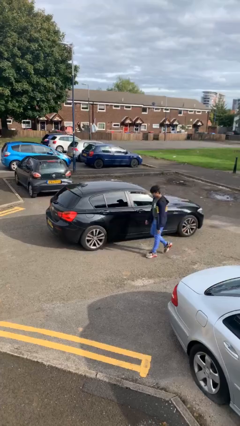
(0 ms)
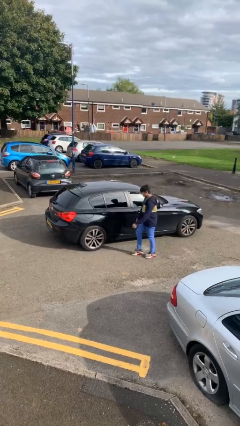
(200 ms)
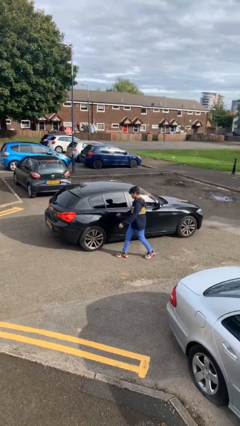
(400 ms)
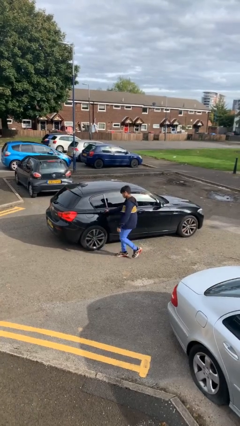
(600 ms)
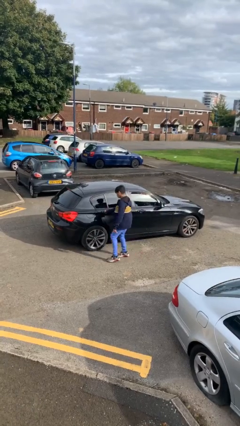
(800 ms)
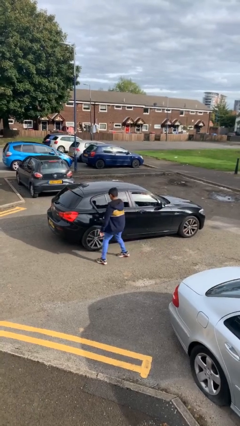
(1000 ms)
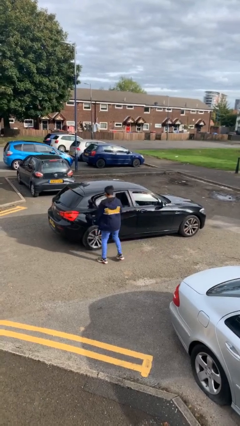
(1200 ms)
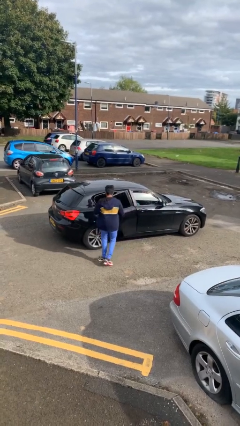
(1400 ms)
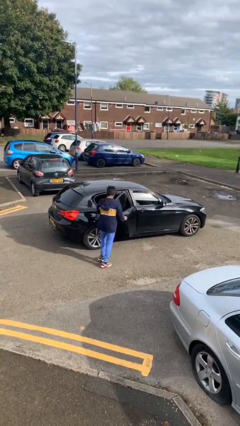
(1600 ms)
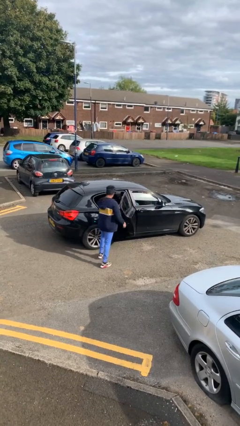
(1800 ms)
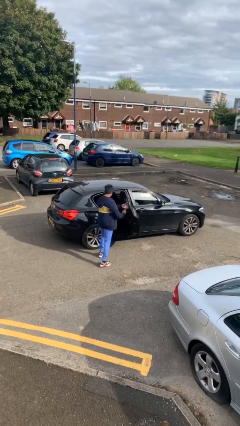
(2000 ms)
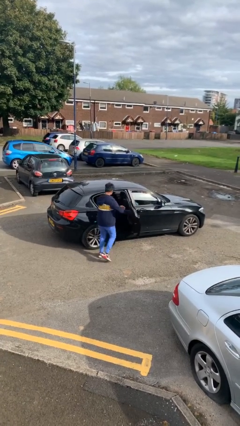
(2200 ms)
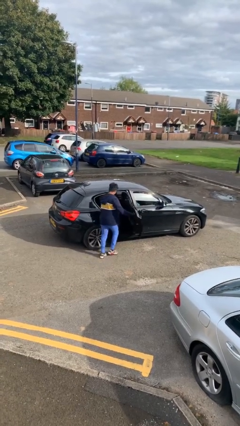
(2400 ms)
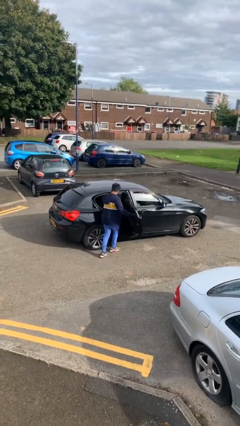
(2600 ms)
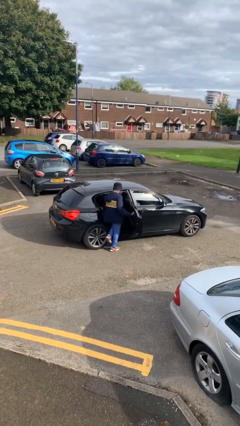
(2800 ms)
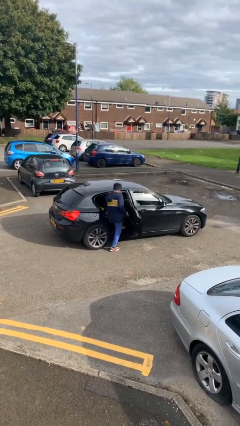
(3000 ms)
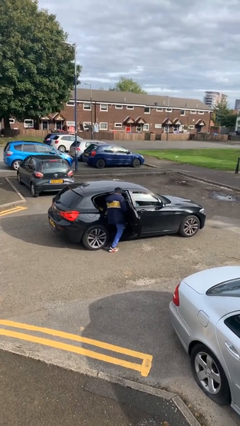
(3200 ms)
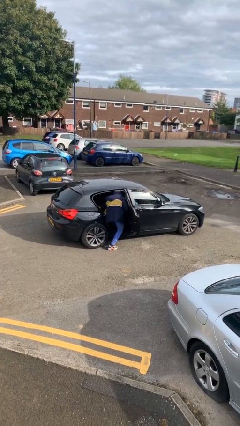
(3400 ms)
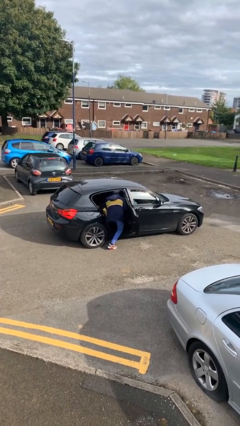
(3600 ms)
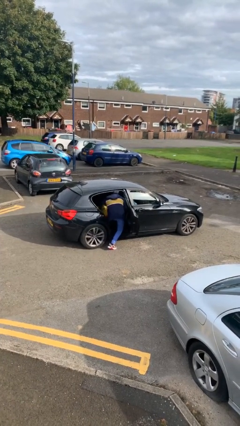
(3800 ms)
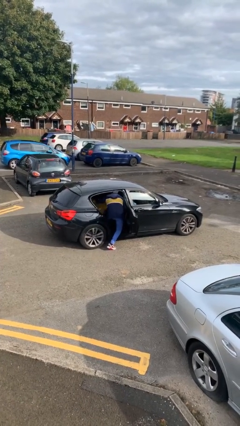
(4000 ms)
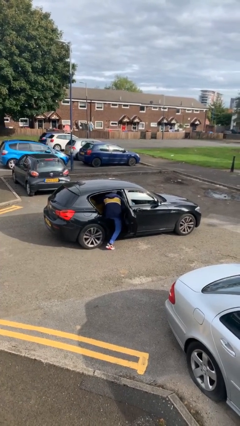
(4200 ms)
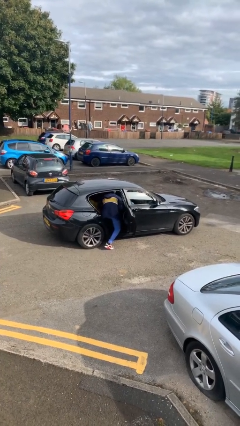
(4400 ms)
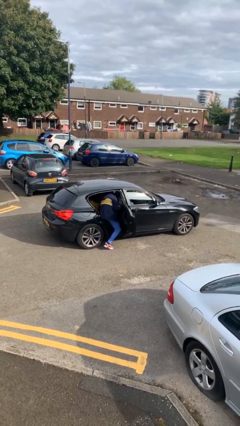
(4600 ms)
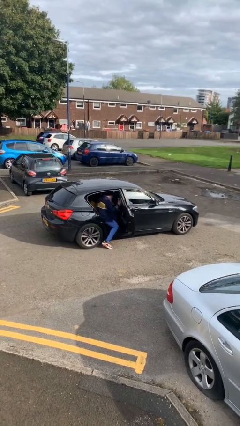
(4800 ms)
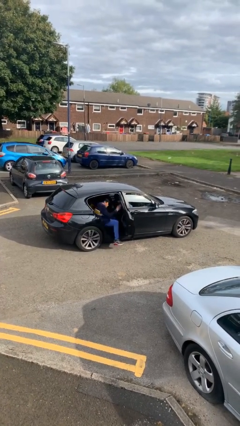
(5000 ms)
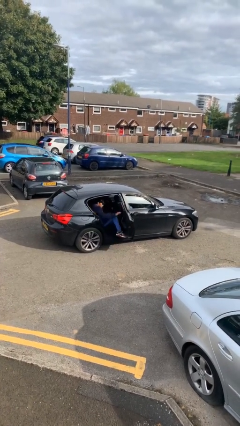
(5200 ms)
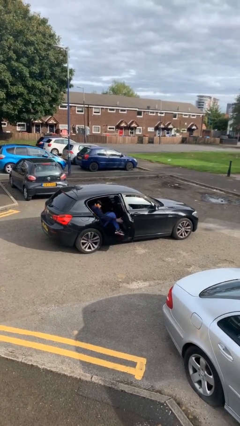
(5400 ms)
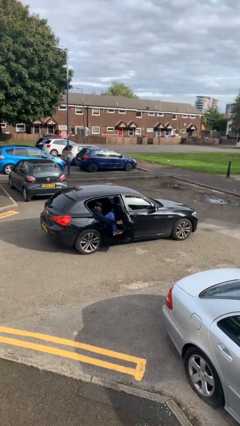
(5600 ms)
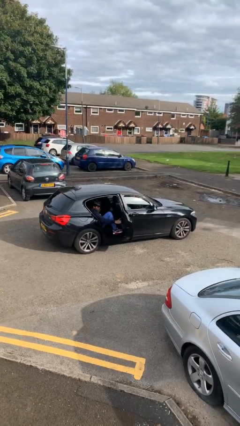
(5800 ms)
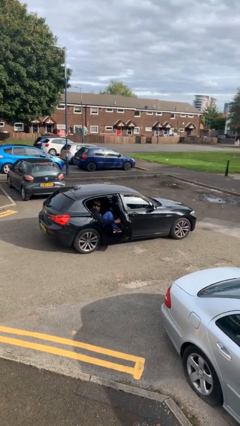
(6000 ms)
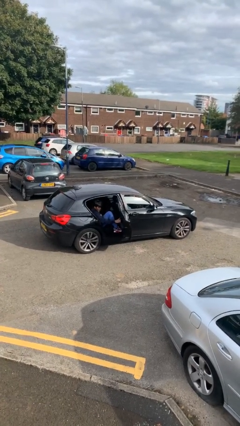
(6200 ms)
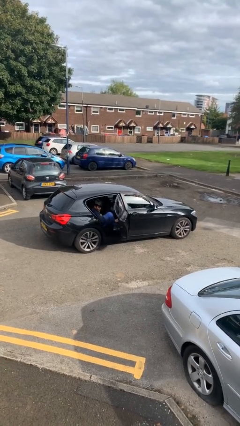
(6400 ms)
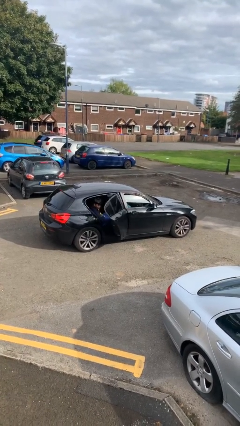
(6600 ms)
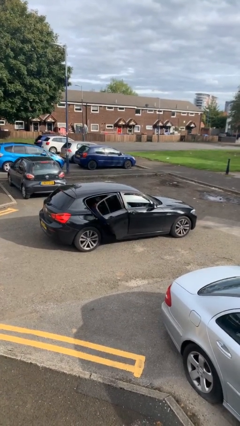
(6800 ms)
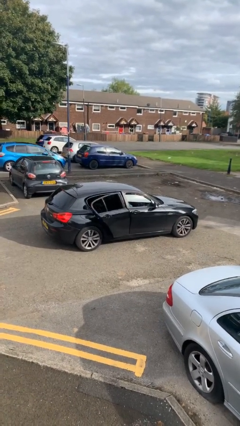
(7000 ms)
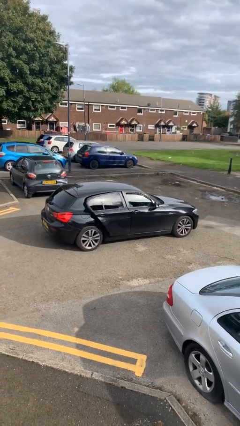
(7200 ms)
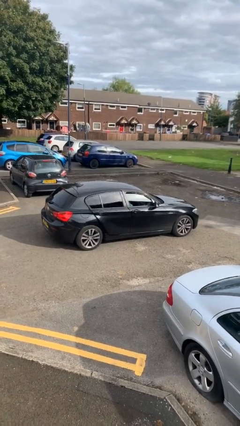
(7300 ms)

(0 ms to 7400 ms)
car picks up person

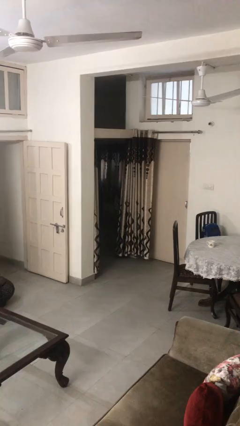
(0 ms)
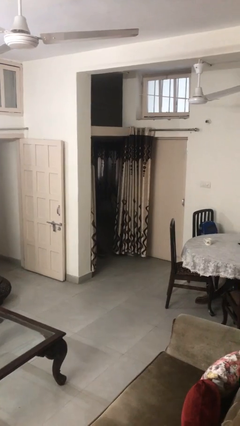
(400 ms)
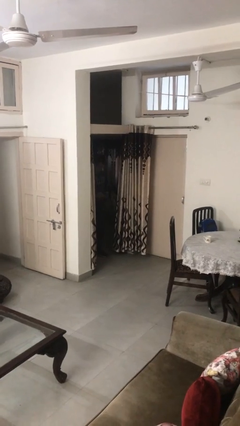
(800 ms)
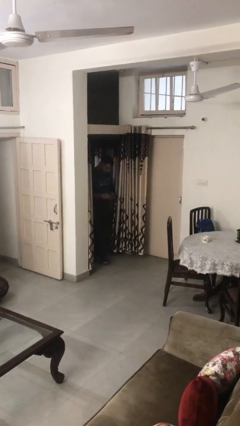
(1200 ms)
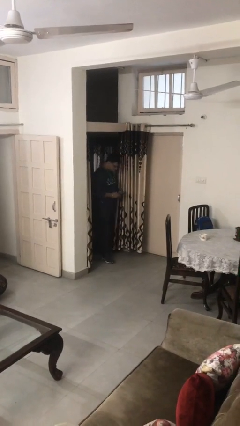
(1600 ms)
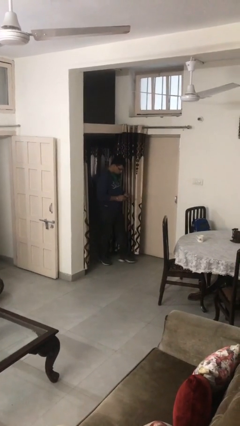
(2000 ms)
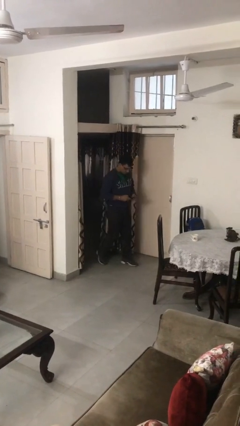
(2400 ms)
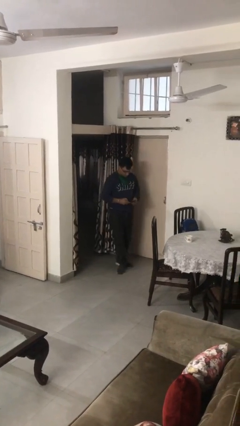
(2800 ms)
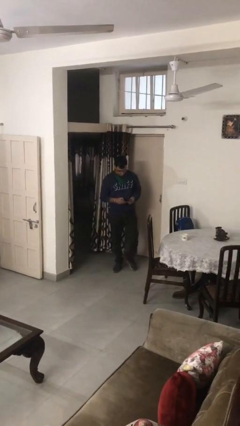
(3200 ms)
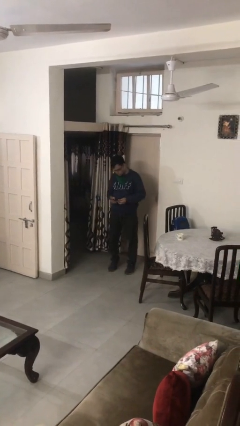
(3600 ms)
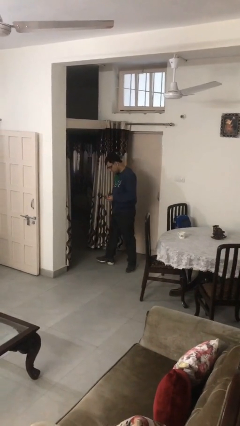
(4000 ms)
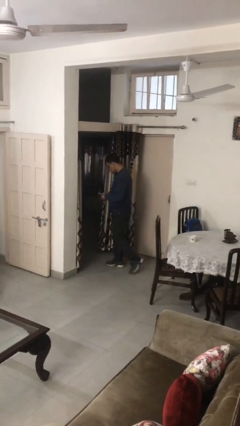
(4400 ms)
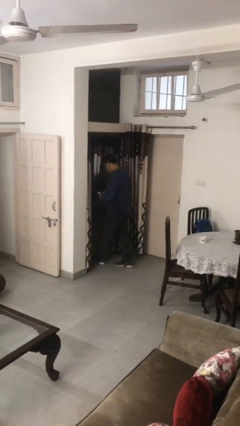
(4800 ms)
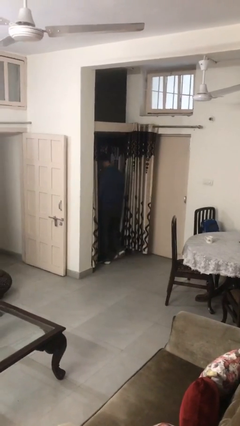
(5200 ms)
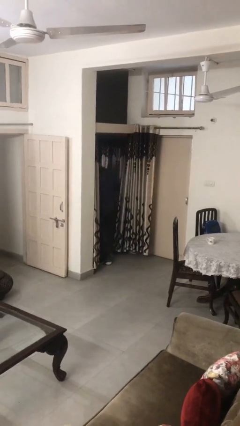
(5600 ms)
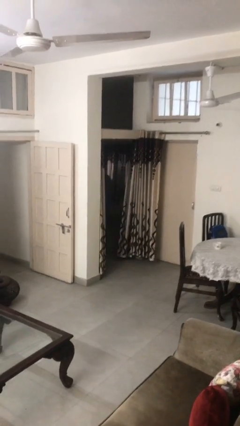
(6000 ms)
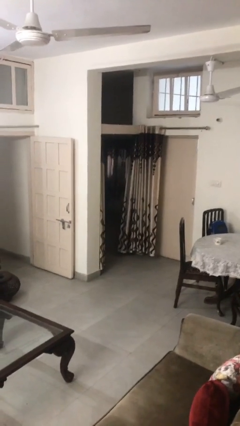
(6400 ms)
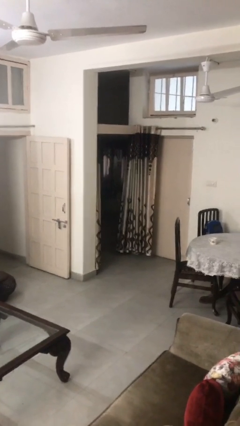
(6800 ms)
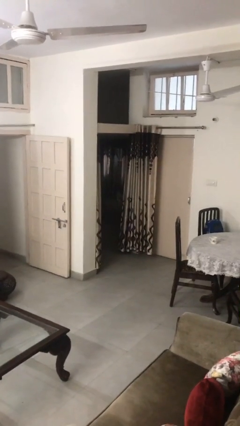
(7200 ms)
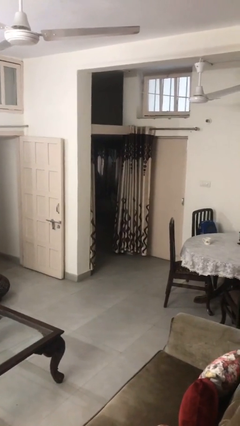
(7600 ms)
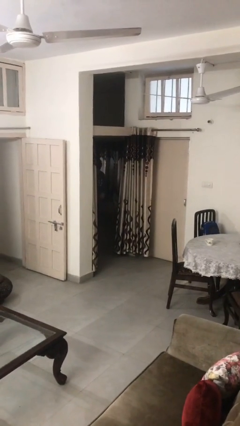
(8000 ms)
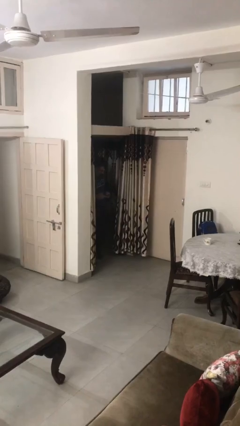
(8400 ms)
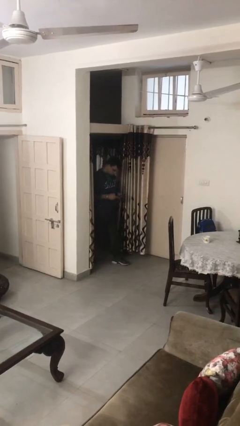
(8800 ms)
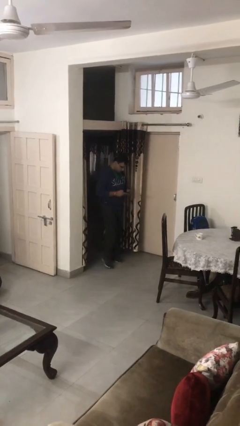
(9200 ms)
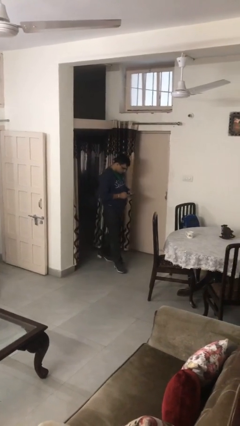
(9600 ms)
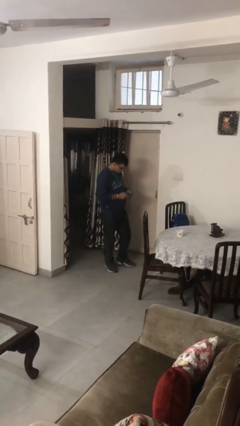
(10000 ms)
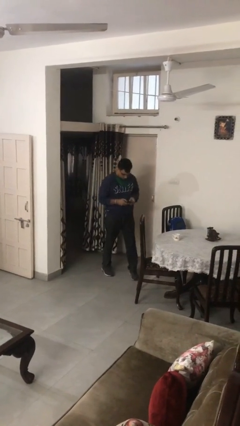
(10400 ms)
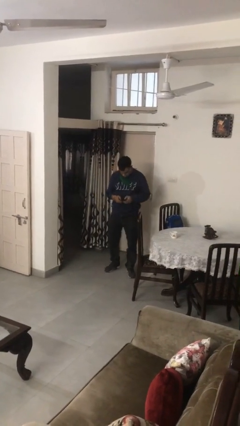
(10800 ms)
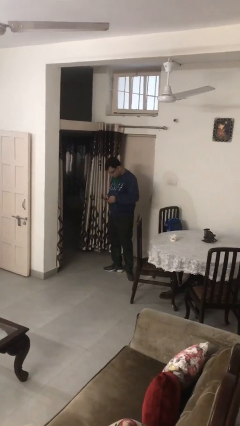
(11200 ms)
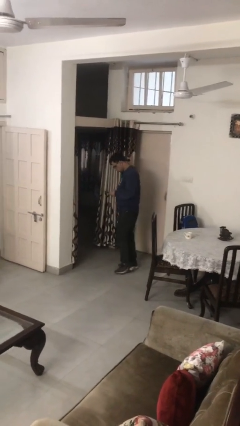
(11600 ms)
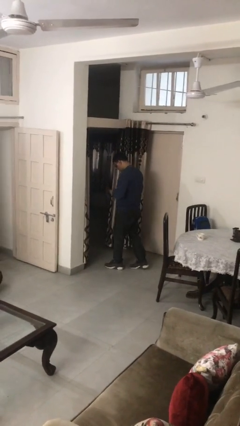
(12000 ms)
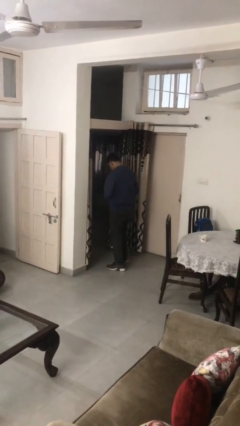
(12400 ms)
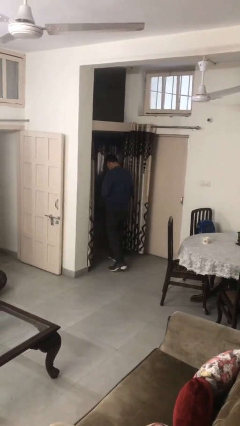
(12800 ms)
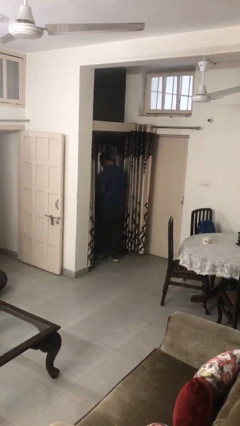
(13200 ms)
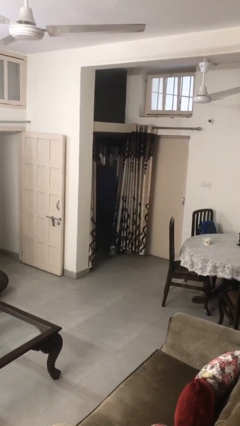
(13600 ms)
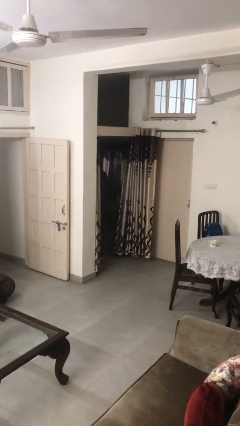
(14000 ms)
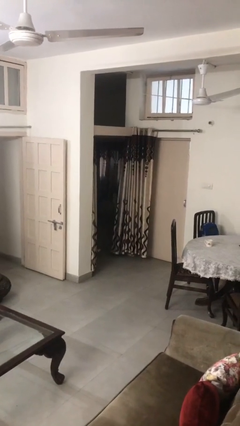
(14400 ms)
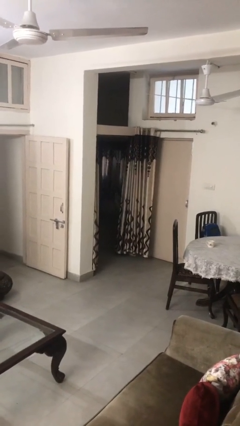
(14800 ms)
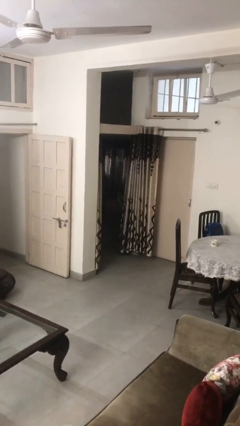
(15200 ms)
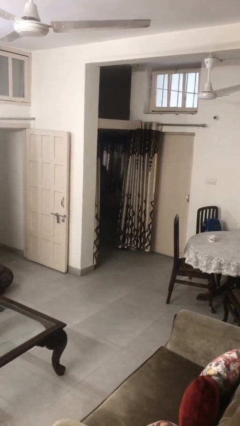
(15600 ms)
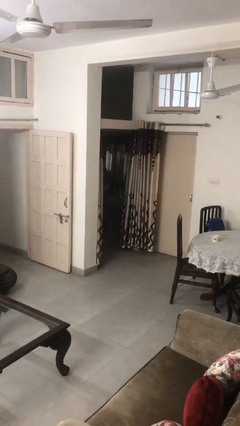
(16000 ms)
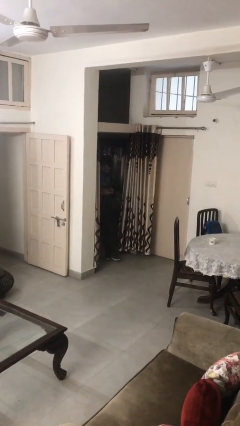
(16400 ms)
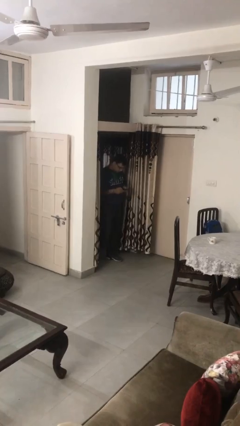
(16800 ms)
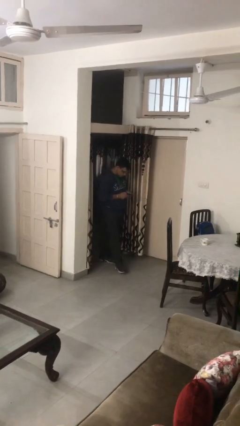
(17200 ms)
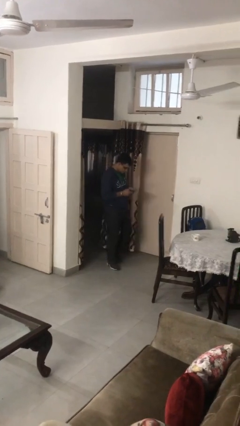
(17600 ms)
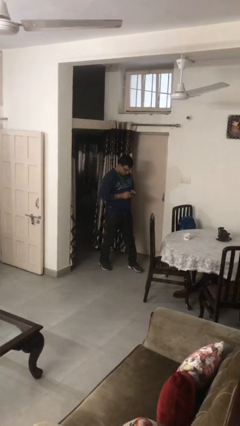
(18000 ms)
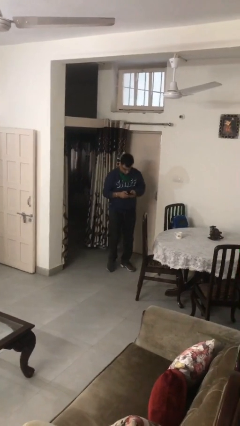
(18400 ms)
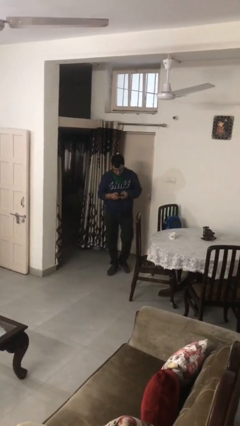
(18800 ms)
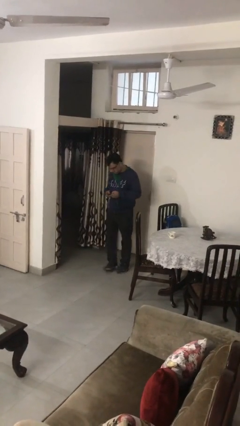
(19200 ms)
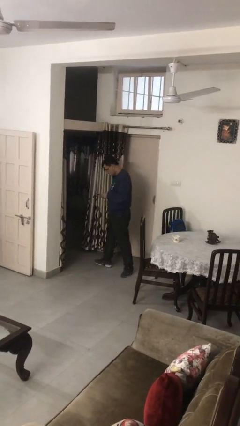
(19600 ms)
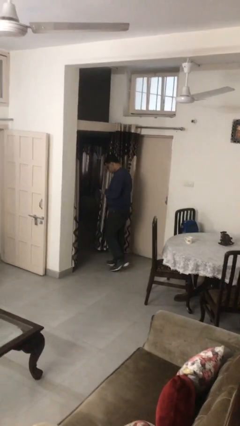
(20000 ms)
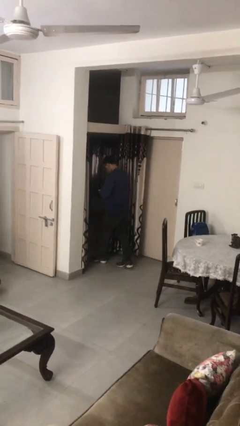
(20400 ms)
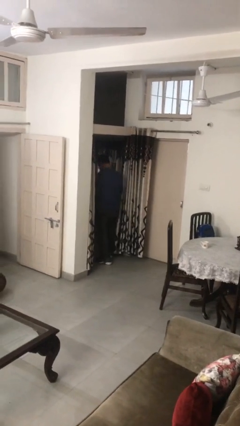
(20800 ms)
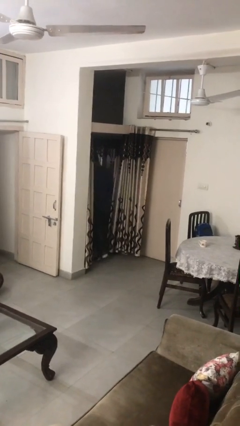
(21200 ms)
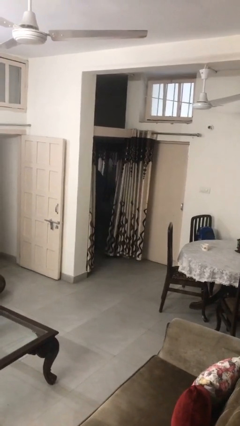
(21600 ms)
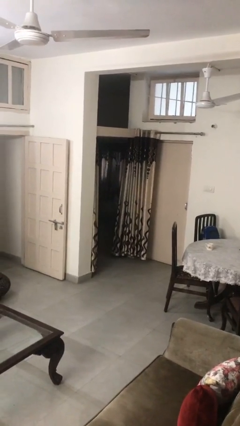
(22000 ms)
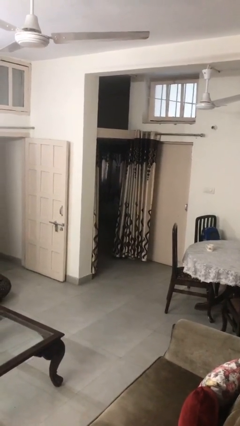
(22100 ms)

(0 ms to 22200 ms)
person texts on phone
